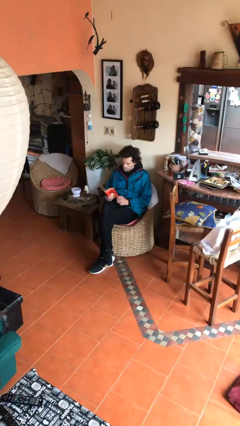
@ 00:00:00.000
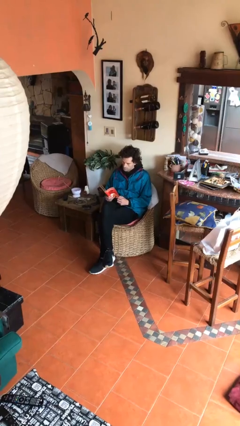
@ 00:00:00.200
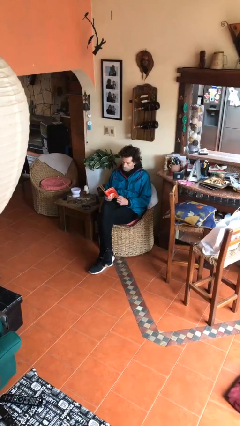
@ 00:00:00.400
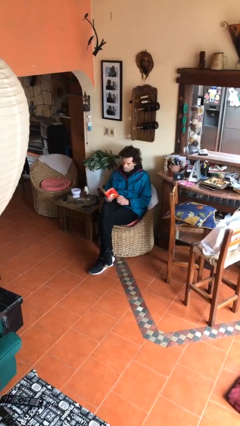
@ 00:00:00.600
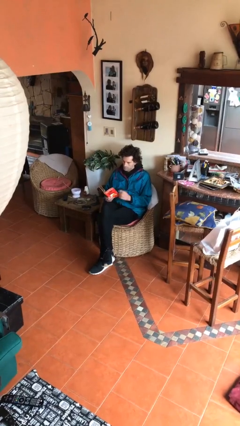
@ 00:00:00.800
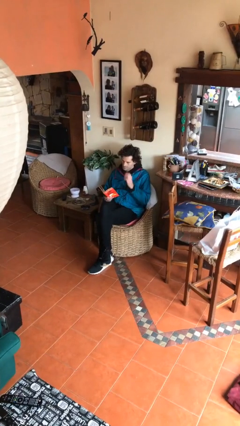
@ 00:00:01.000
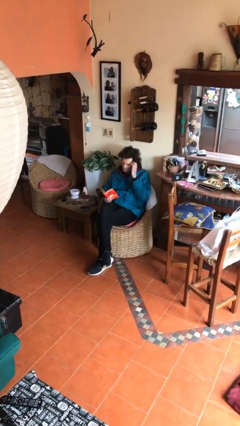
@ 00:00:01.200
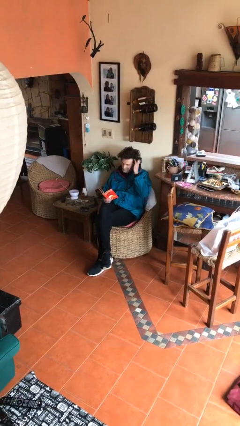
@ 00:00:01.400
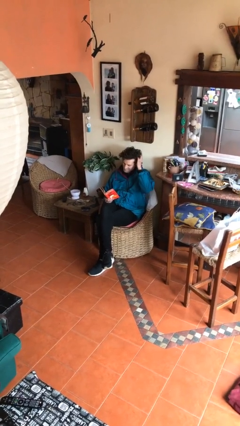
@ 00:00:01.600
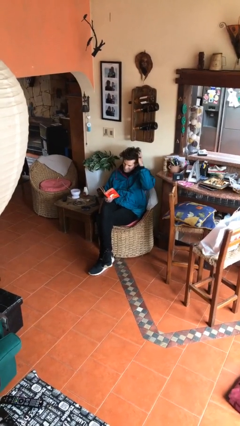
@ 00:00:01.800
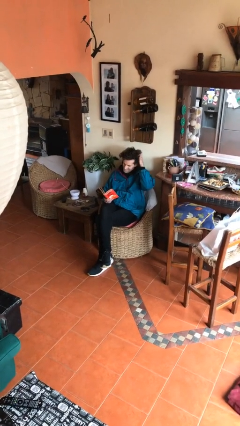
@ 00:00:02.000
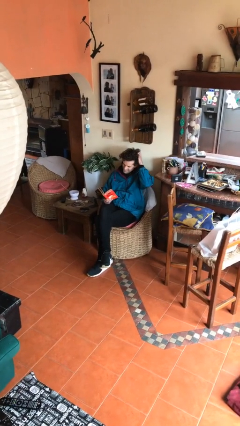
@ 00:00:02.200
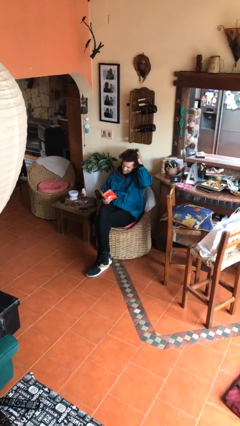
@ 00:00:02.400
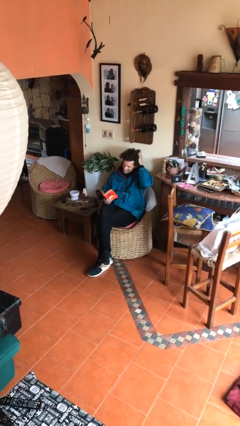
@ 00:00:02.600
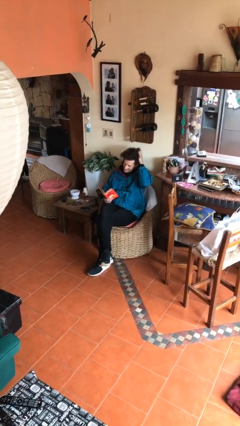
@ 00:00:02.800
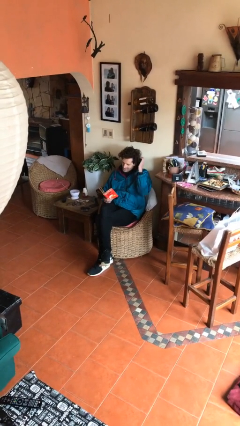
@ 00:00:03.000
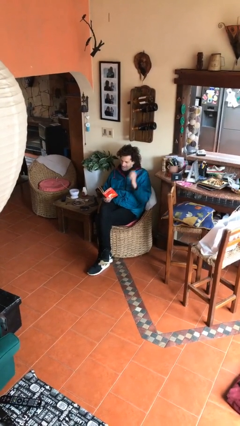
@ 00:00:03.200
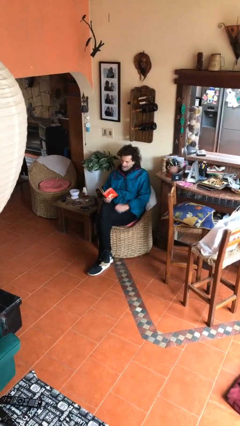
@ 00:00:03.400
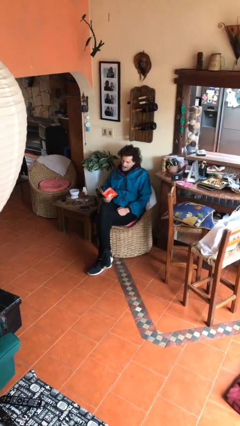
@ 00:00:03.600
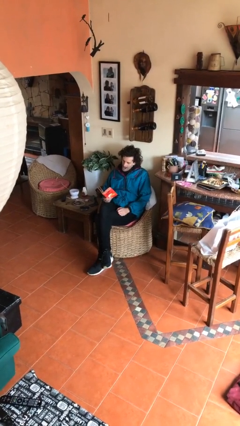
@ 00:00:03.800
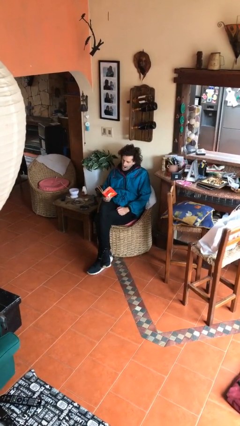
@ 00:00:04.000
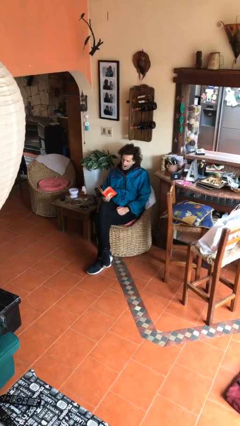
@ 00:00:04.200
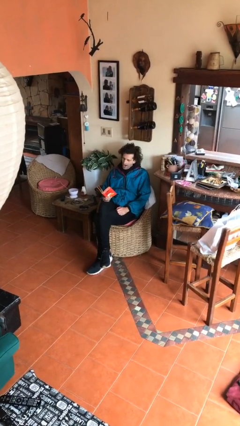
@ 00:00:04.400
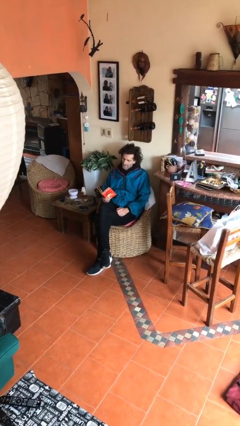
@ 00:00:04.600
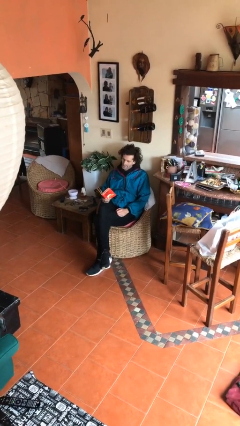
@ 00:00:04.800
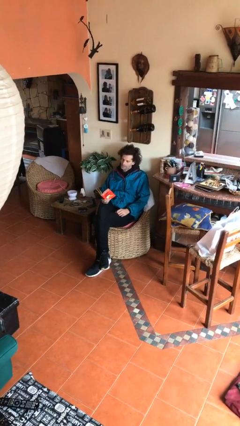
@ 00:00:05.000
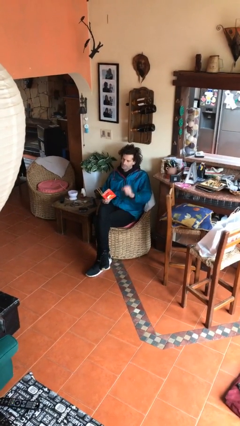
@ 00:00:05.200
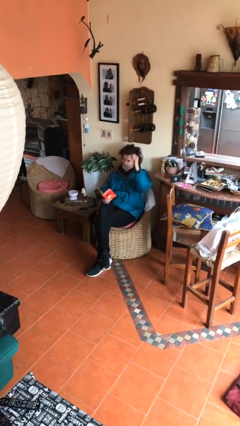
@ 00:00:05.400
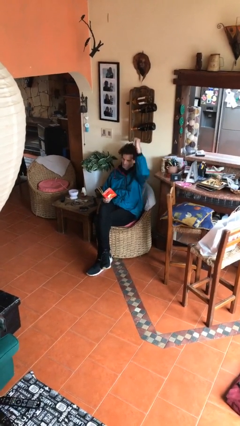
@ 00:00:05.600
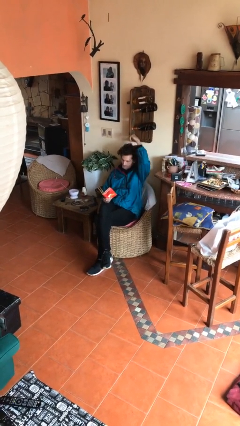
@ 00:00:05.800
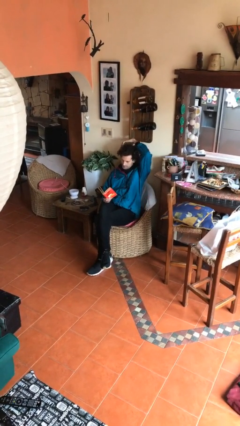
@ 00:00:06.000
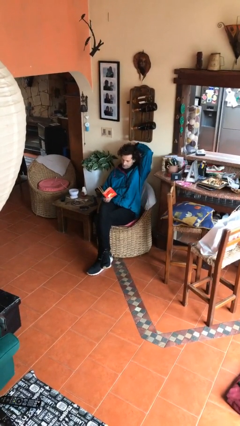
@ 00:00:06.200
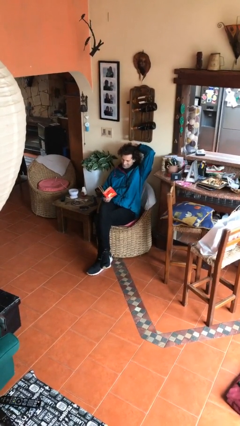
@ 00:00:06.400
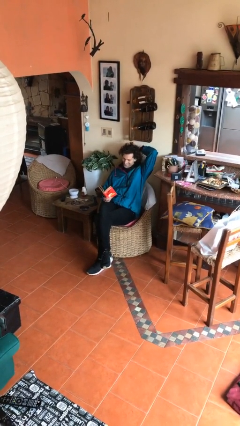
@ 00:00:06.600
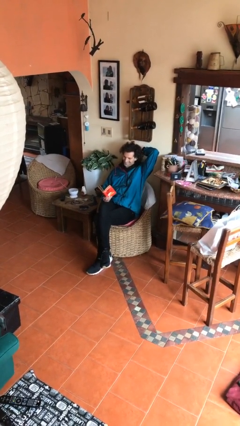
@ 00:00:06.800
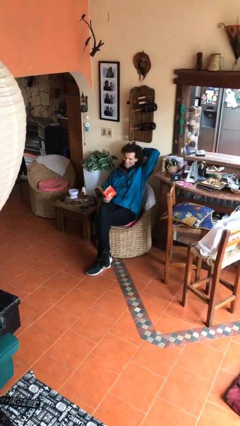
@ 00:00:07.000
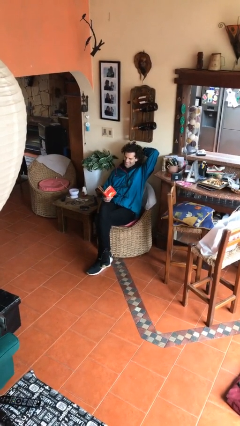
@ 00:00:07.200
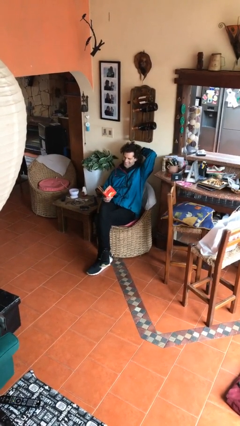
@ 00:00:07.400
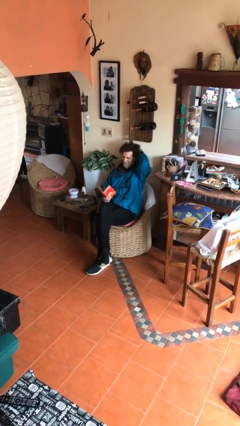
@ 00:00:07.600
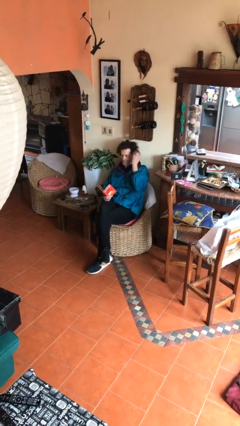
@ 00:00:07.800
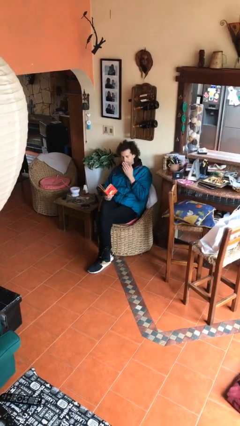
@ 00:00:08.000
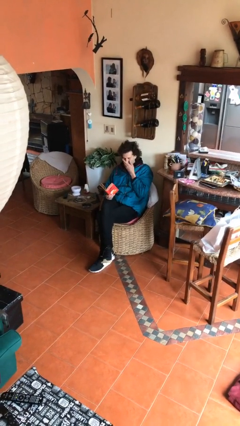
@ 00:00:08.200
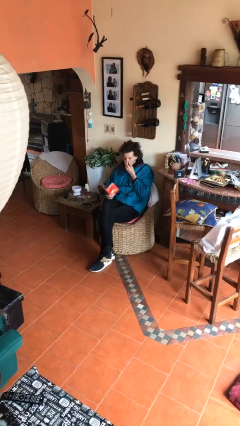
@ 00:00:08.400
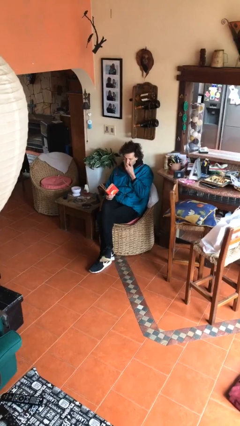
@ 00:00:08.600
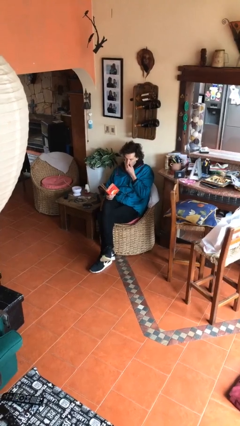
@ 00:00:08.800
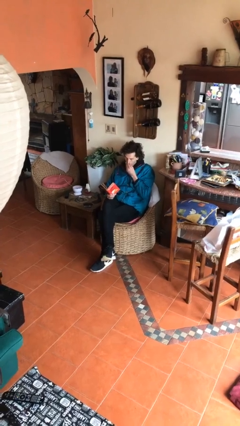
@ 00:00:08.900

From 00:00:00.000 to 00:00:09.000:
person reads document

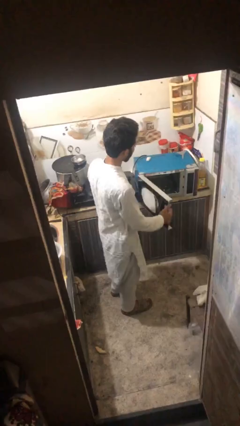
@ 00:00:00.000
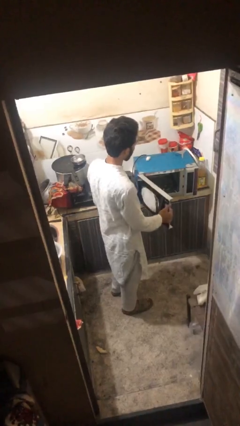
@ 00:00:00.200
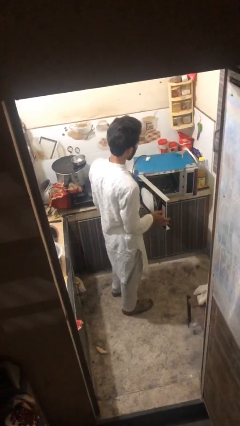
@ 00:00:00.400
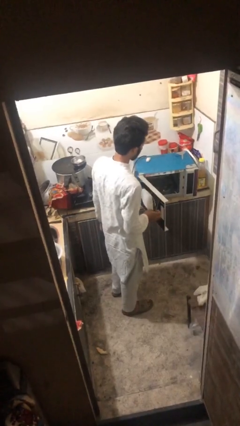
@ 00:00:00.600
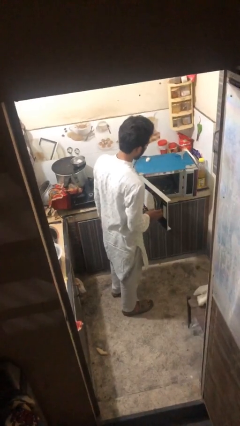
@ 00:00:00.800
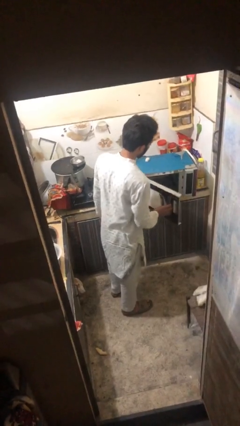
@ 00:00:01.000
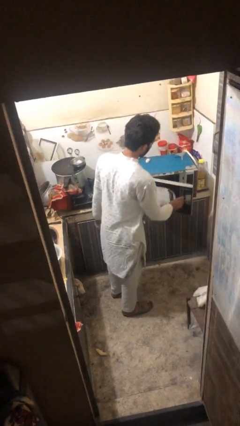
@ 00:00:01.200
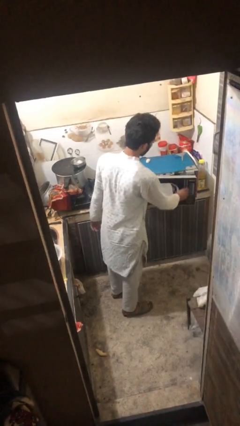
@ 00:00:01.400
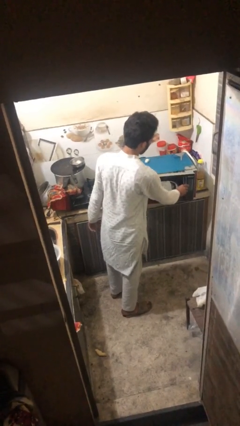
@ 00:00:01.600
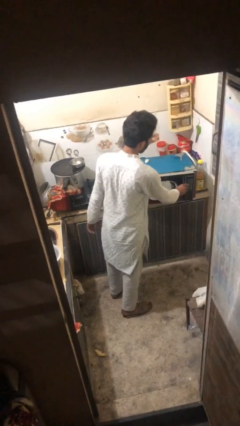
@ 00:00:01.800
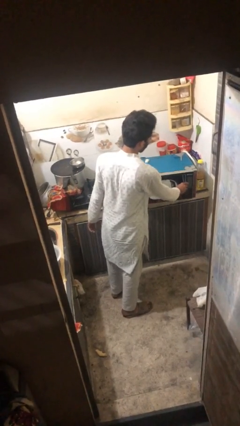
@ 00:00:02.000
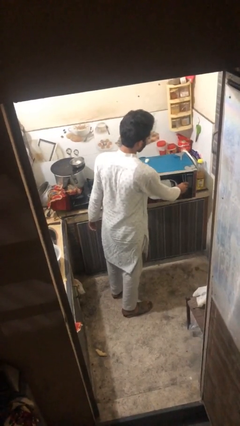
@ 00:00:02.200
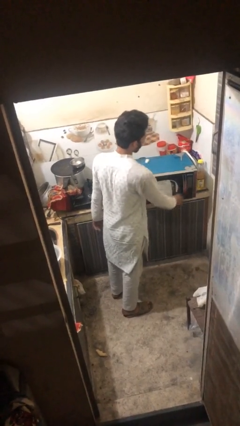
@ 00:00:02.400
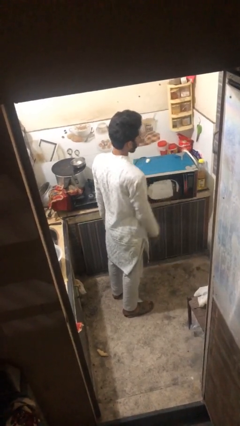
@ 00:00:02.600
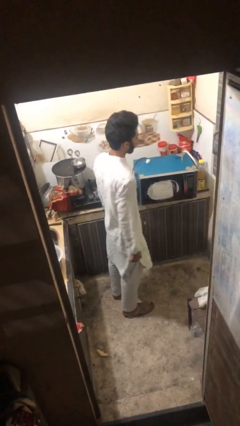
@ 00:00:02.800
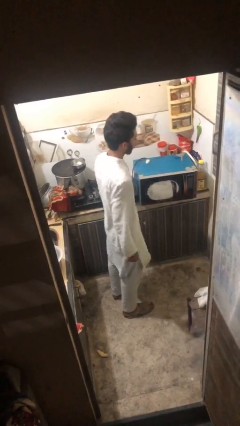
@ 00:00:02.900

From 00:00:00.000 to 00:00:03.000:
person closes oven door

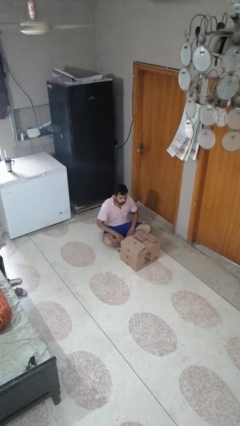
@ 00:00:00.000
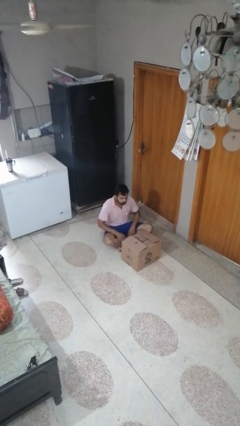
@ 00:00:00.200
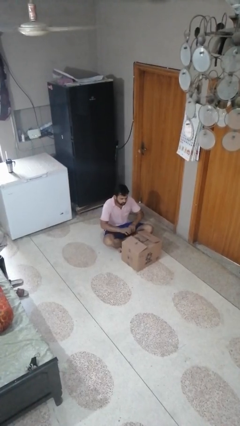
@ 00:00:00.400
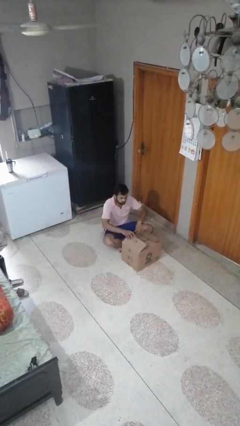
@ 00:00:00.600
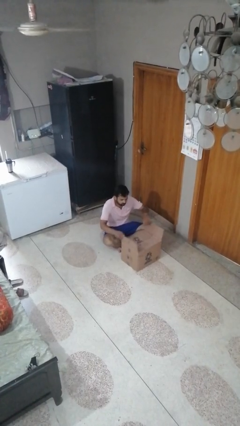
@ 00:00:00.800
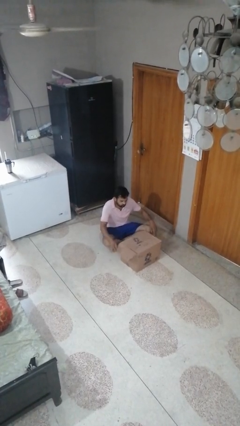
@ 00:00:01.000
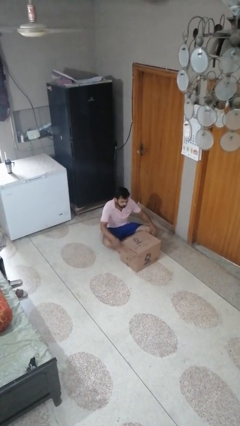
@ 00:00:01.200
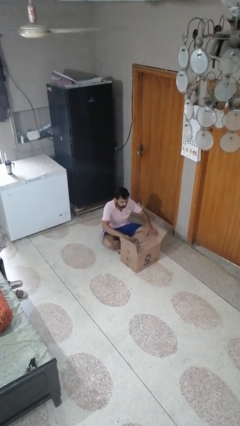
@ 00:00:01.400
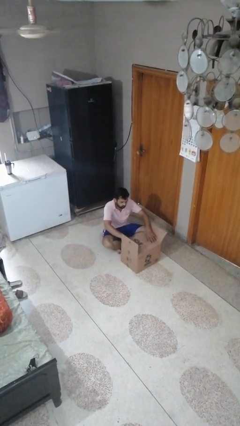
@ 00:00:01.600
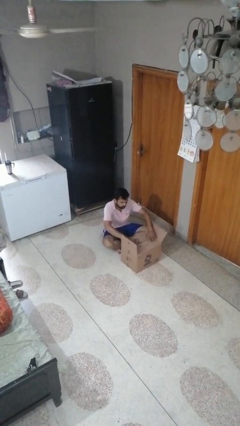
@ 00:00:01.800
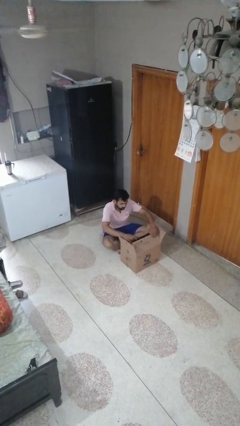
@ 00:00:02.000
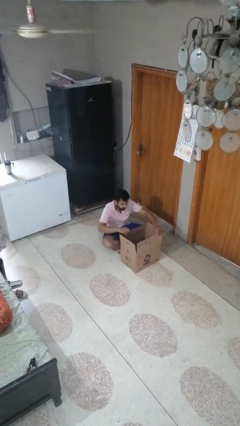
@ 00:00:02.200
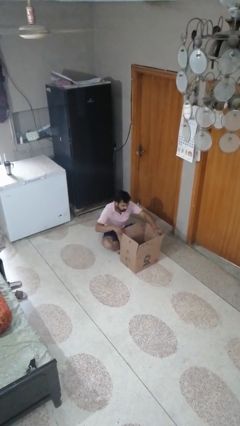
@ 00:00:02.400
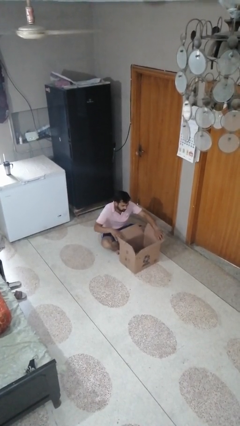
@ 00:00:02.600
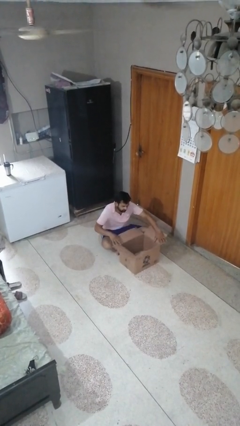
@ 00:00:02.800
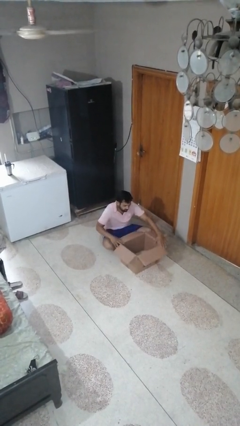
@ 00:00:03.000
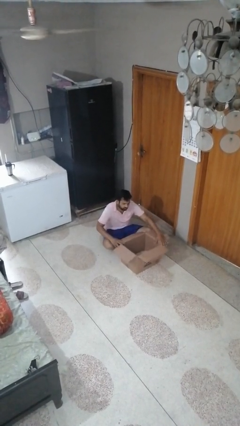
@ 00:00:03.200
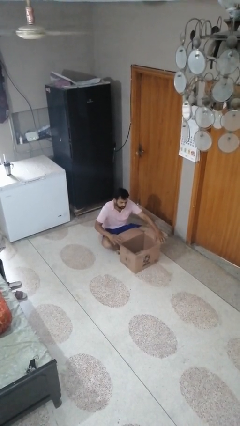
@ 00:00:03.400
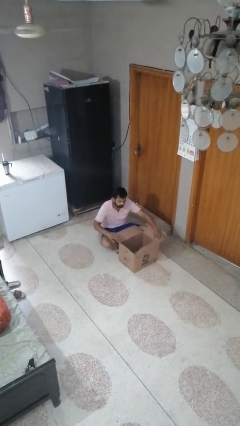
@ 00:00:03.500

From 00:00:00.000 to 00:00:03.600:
person opens box

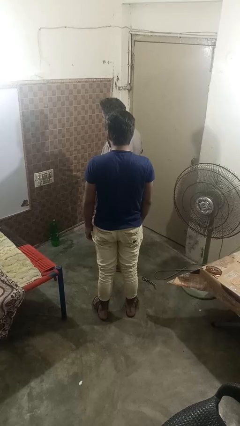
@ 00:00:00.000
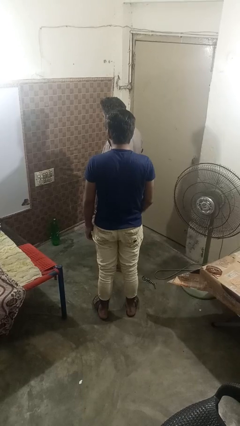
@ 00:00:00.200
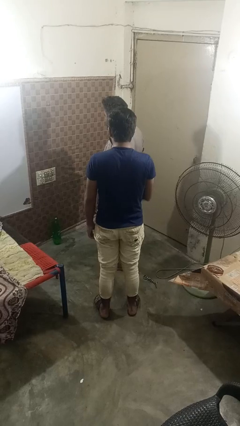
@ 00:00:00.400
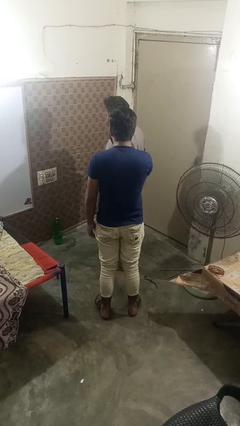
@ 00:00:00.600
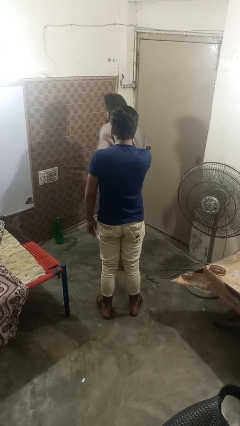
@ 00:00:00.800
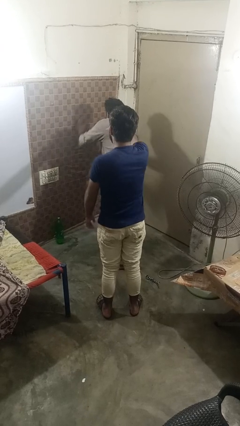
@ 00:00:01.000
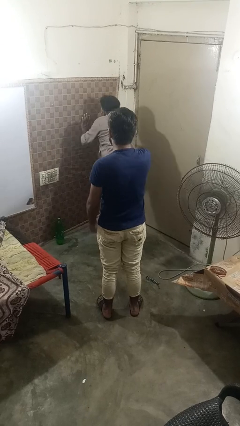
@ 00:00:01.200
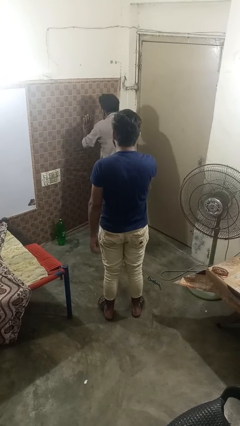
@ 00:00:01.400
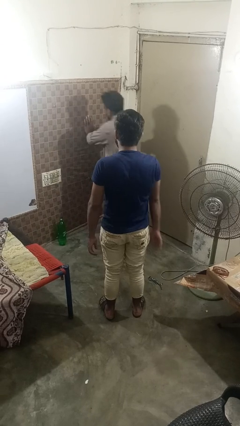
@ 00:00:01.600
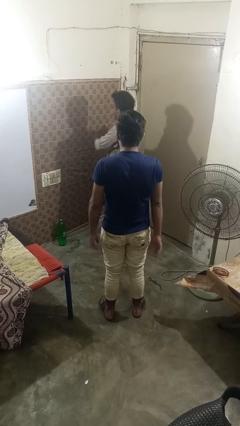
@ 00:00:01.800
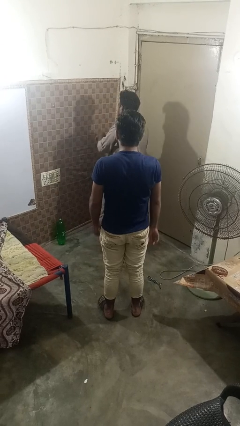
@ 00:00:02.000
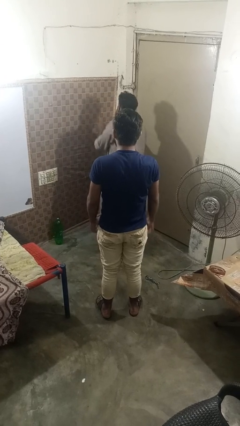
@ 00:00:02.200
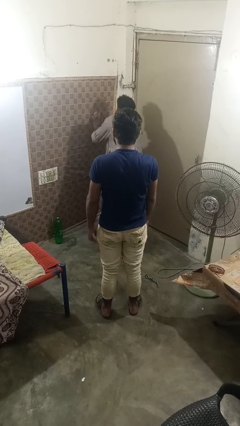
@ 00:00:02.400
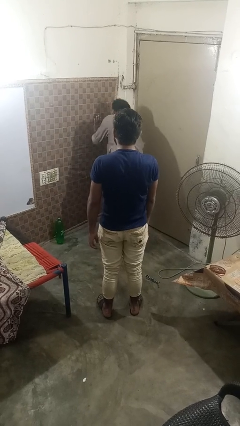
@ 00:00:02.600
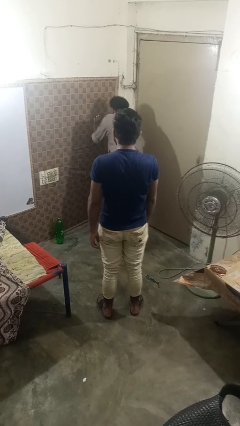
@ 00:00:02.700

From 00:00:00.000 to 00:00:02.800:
person shoves person
